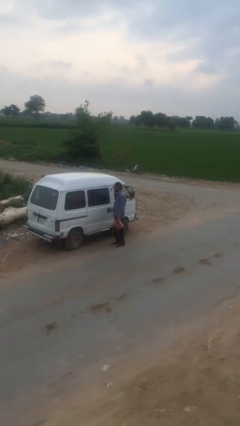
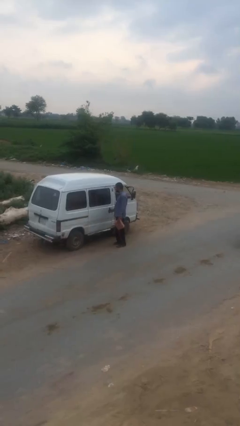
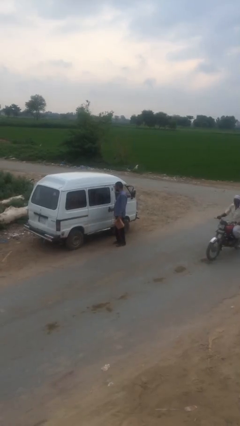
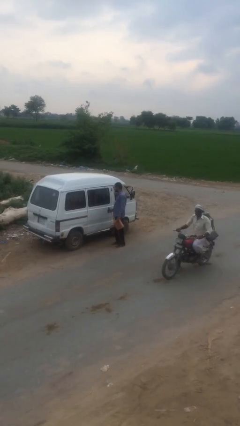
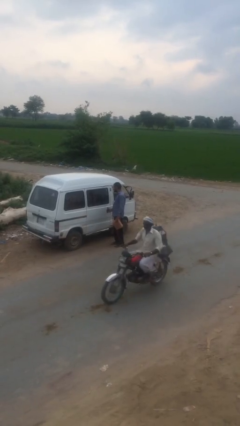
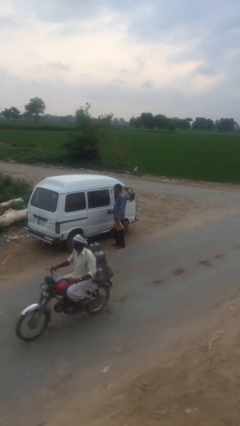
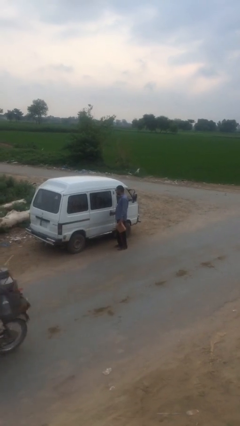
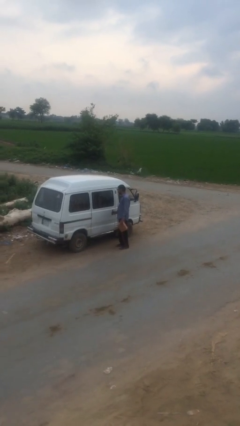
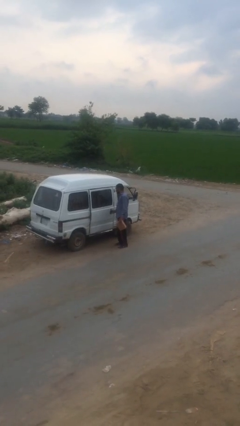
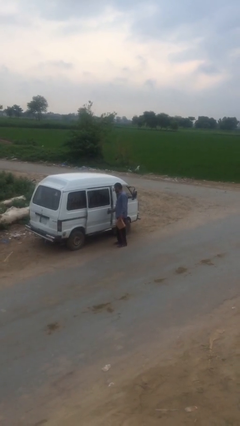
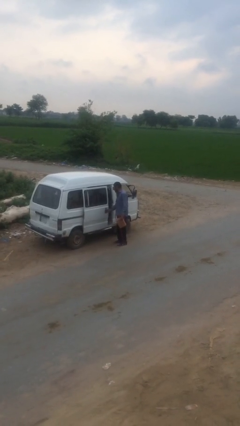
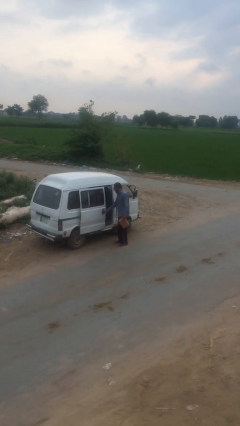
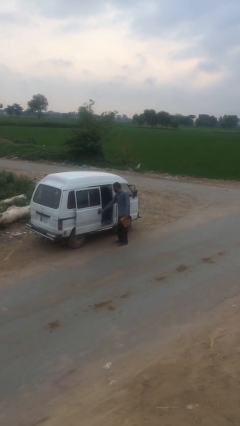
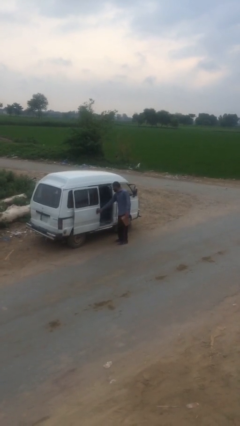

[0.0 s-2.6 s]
person opens car door

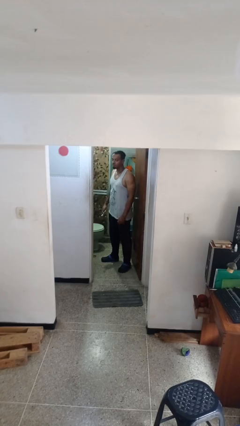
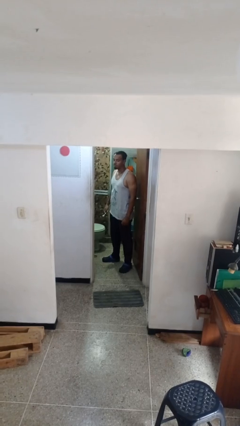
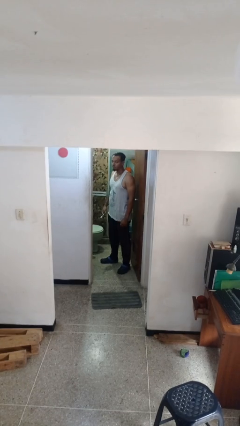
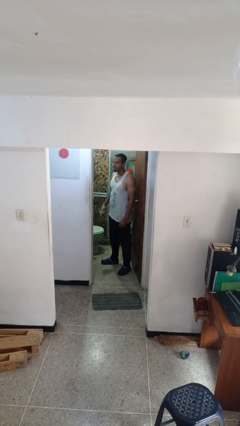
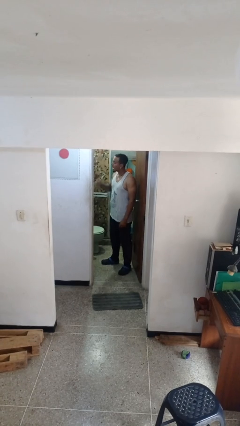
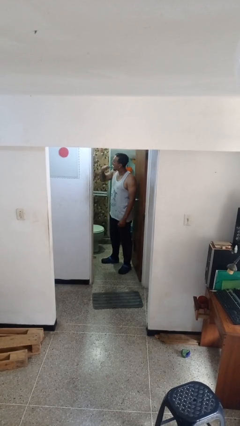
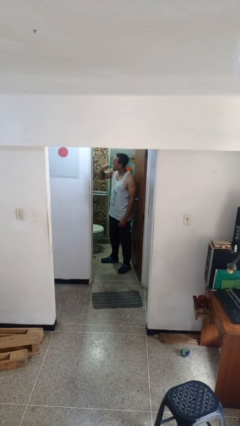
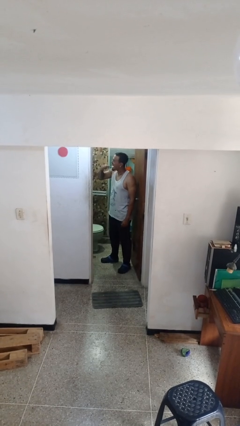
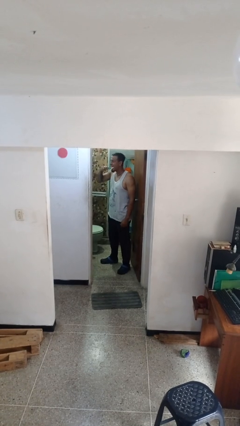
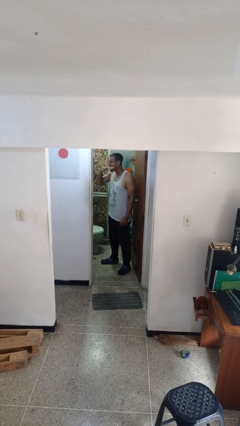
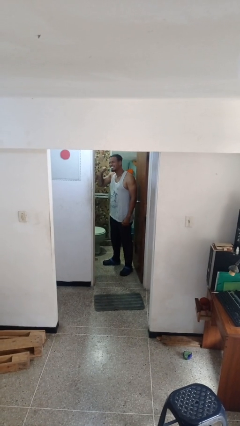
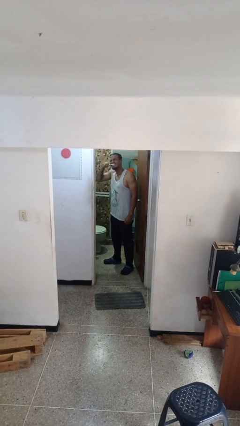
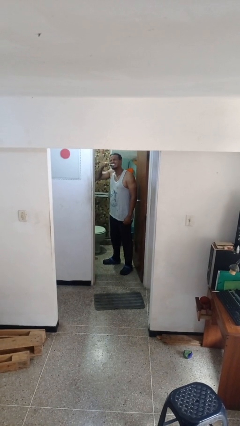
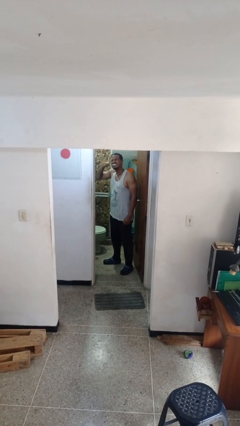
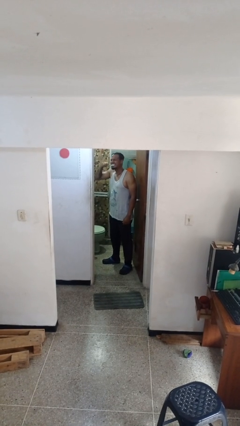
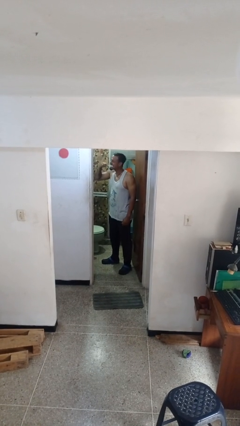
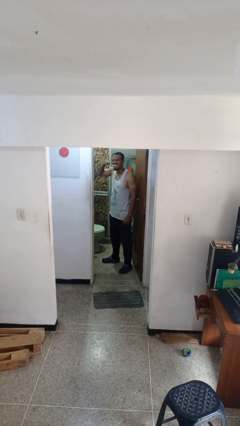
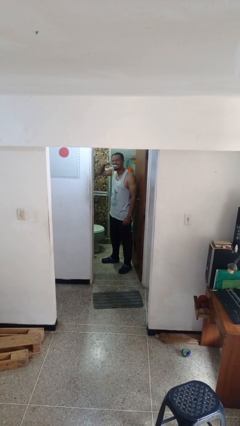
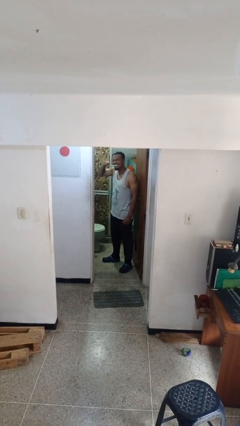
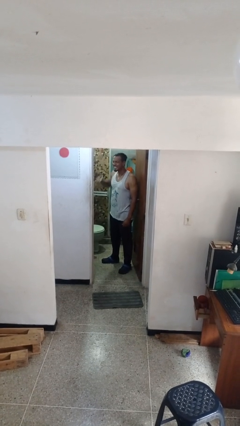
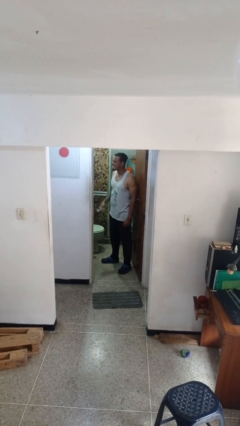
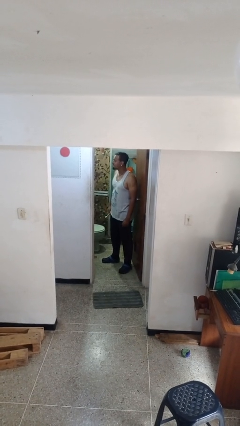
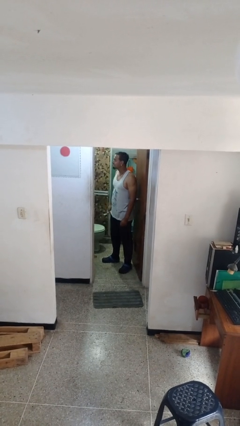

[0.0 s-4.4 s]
person brushes teeth

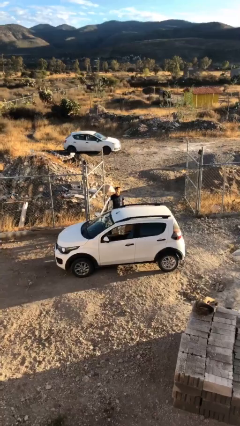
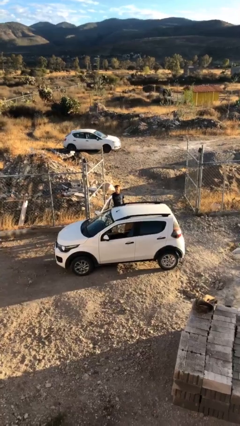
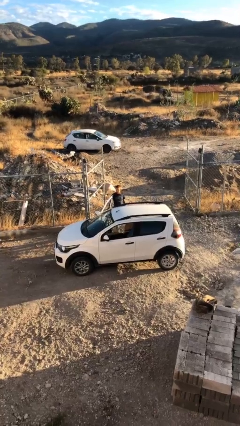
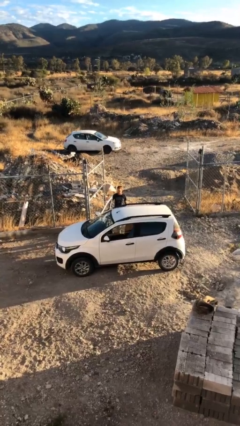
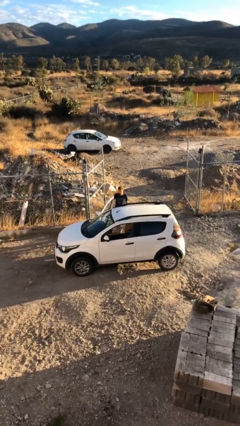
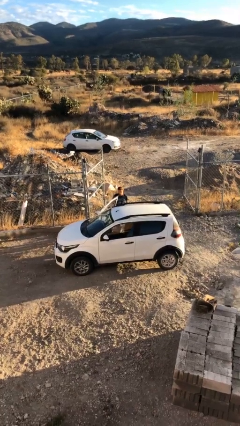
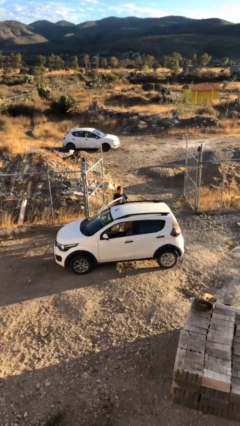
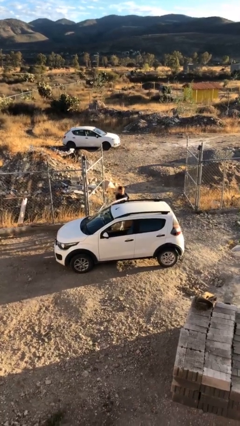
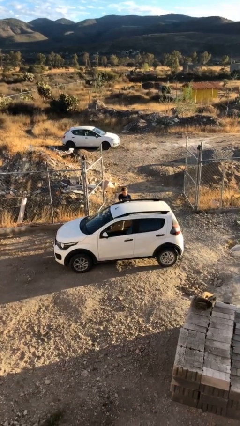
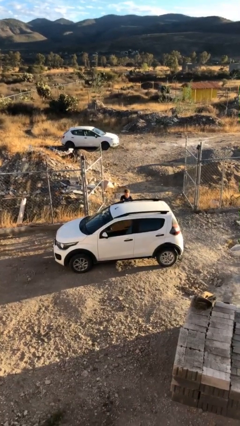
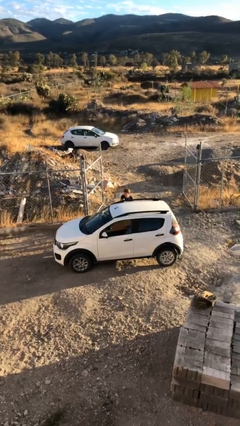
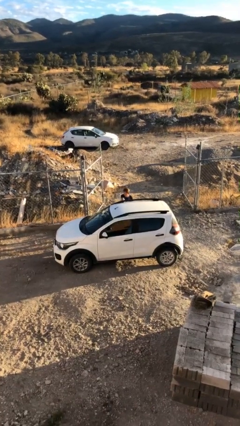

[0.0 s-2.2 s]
person closes car door

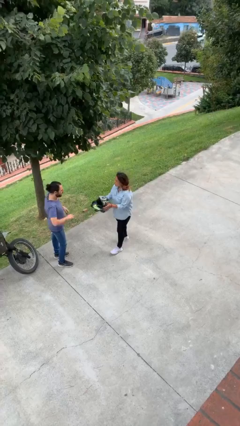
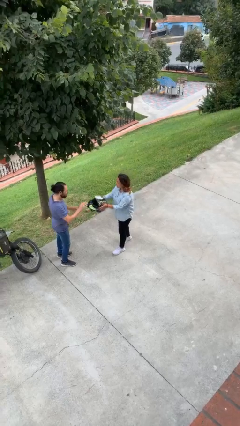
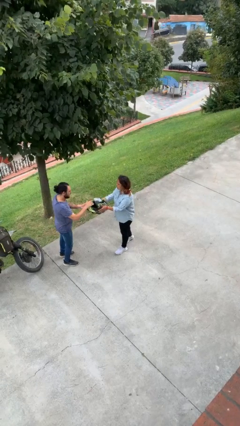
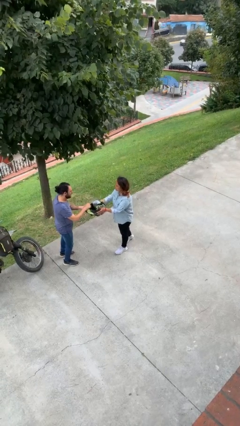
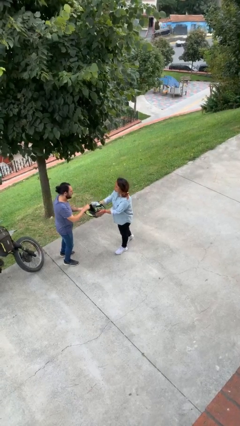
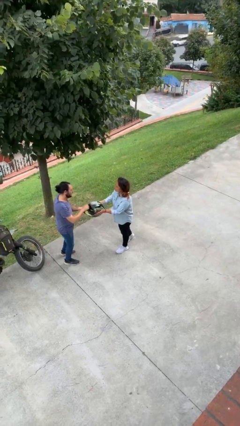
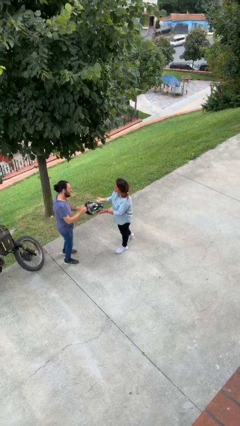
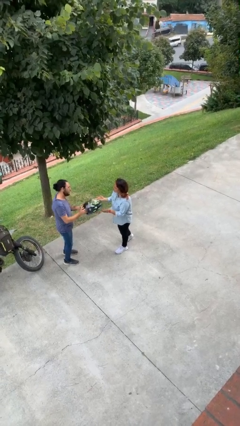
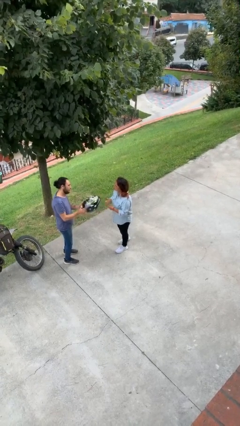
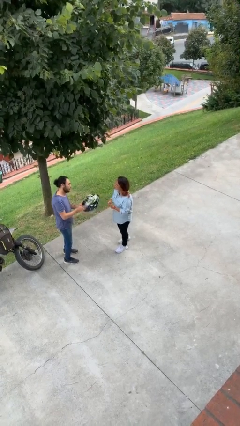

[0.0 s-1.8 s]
person transfers object to person

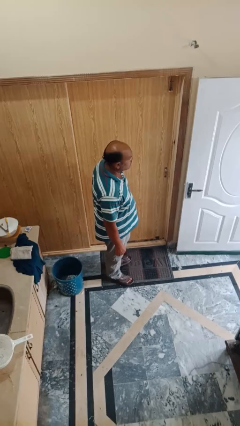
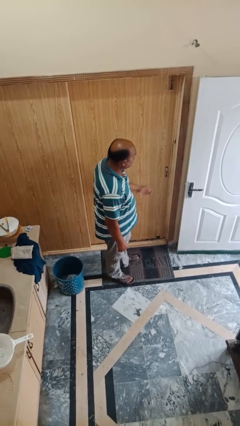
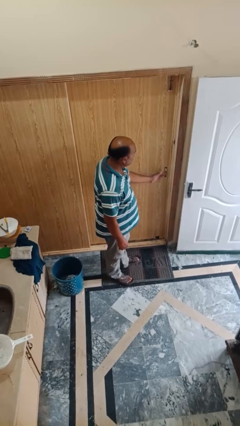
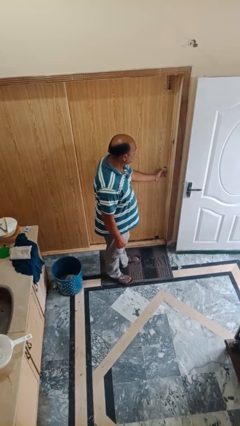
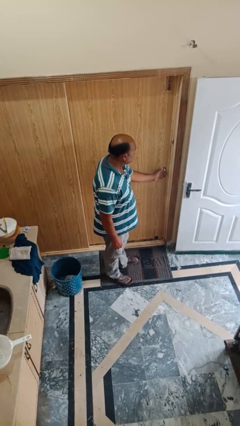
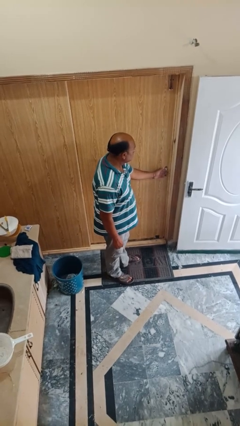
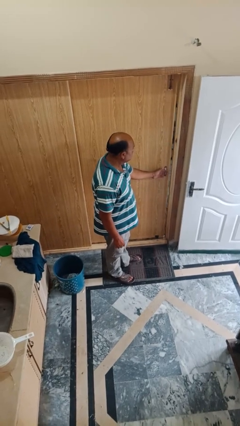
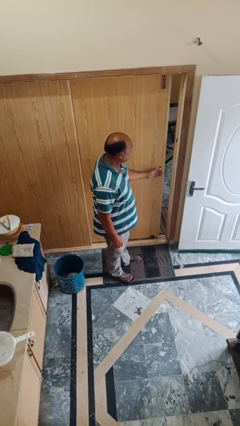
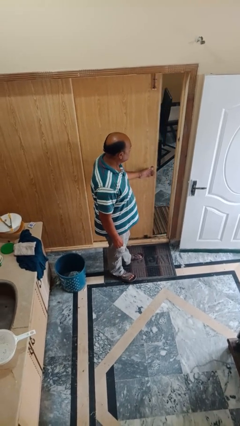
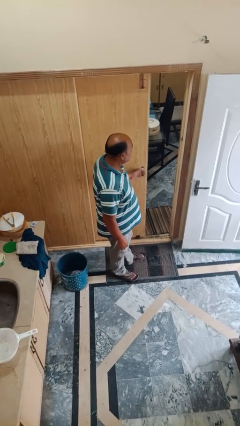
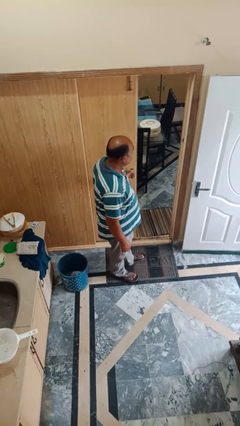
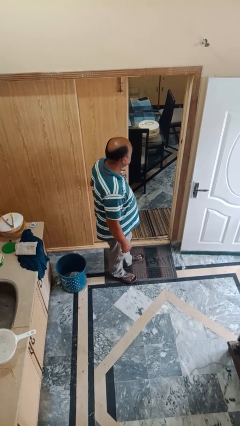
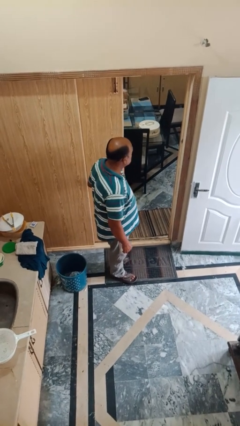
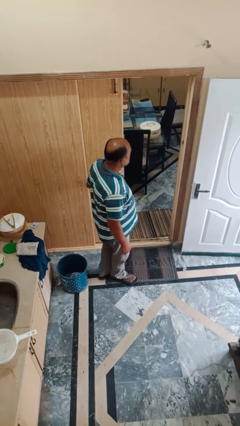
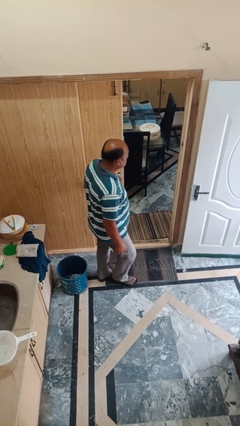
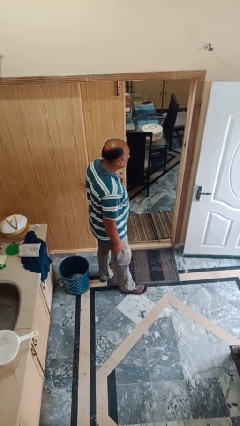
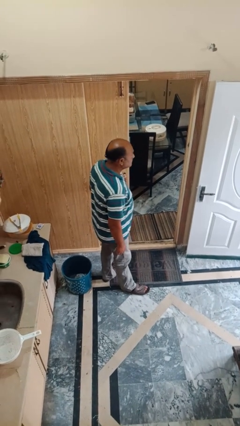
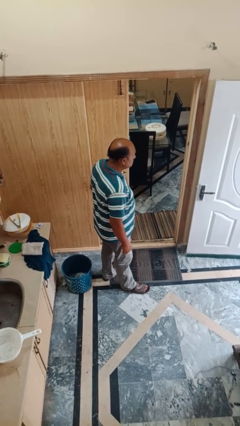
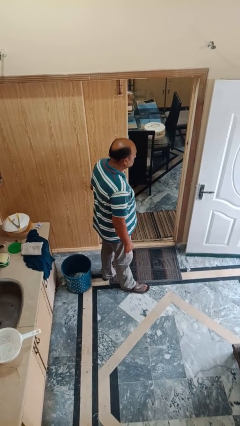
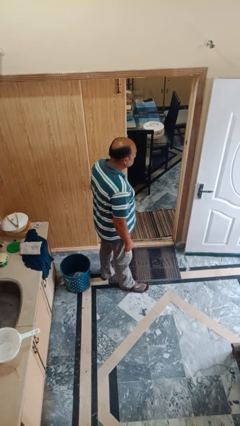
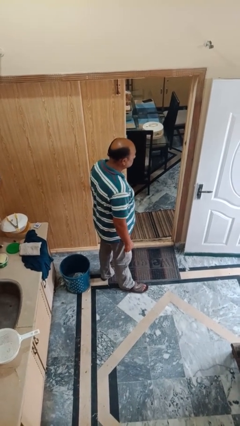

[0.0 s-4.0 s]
person opens sliding door

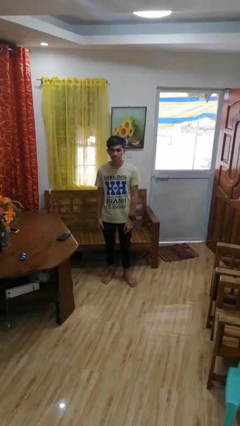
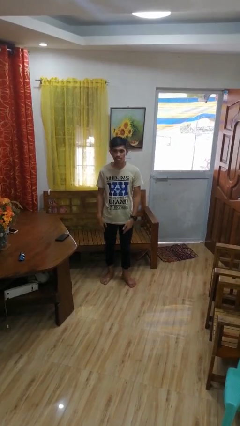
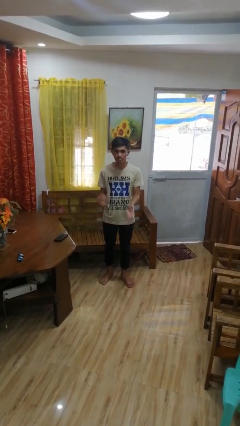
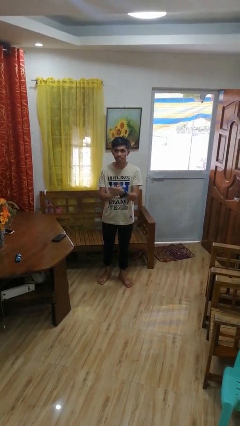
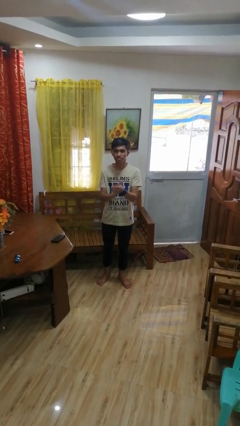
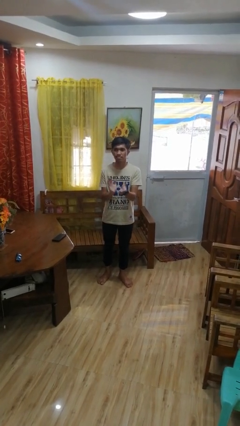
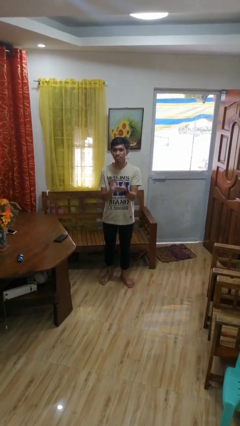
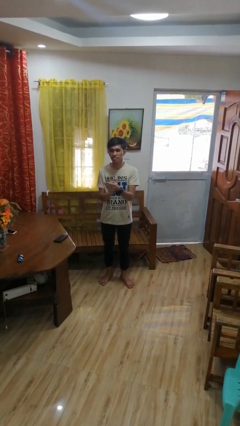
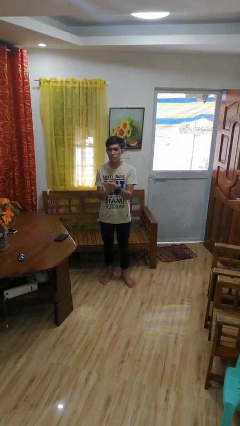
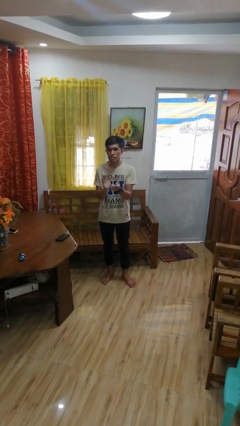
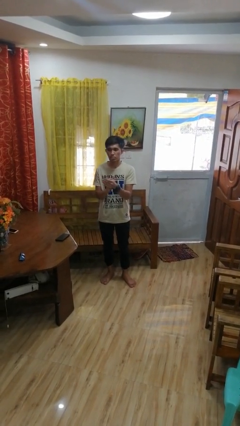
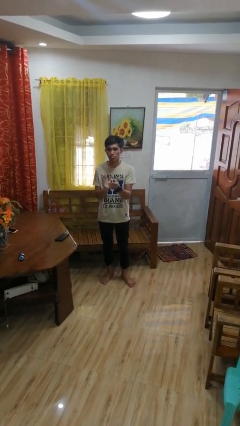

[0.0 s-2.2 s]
person claps hands

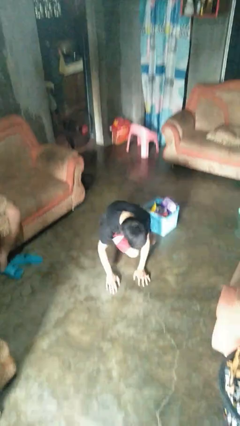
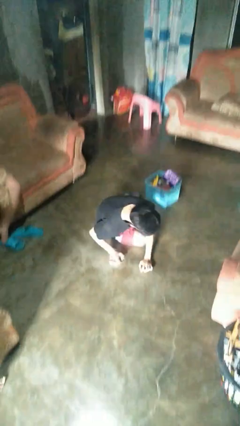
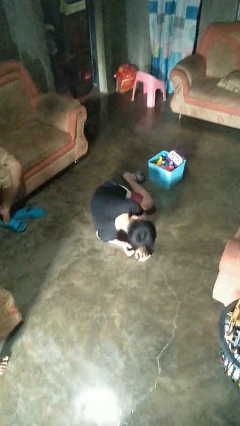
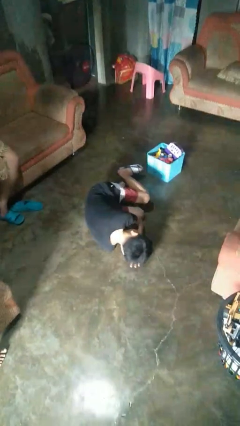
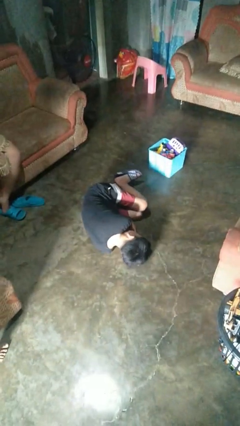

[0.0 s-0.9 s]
person lies down on floor
